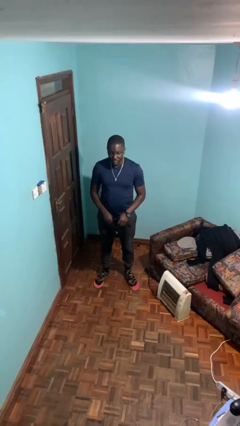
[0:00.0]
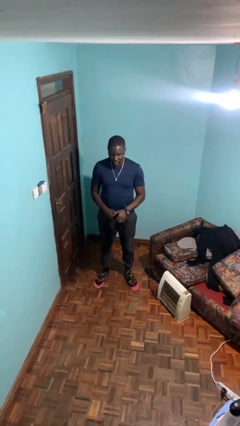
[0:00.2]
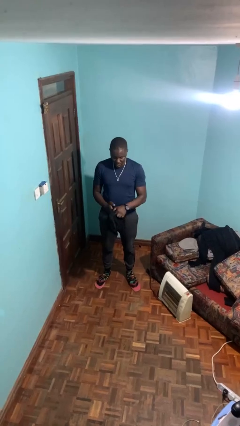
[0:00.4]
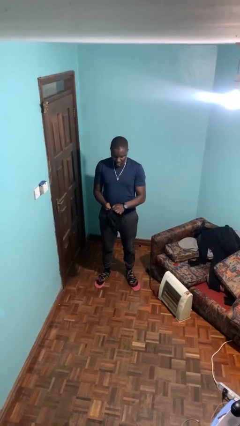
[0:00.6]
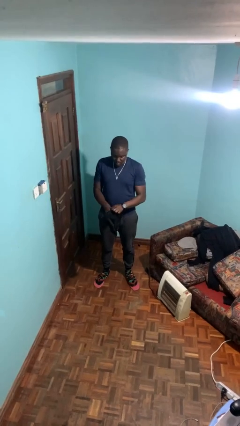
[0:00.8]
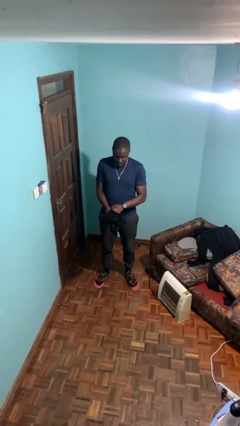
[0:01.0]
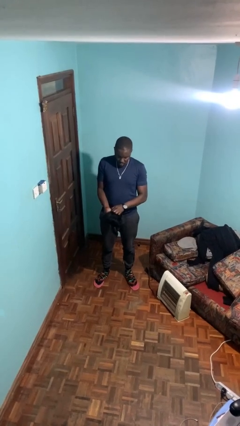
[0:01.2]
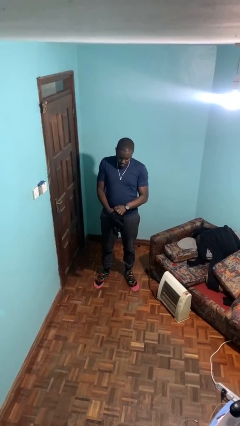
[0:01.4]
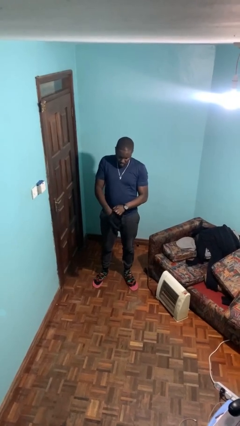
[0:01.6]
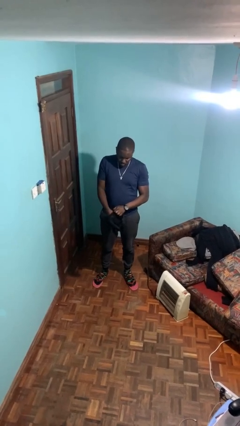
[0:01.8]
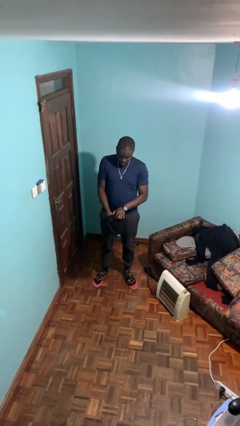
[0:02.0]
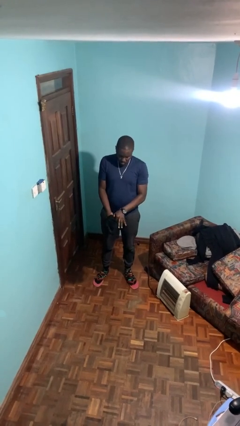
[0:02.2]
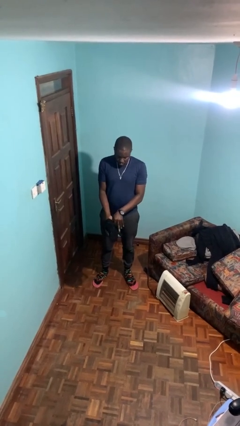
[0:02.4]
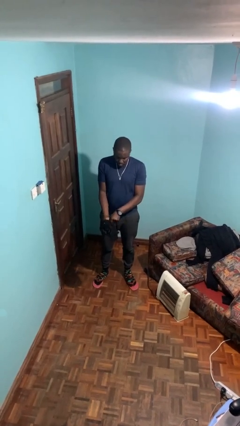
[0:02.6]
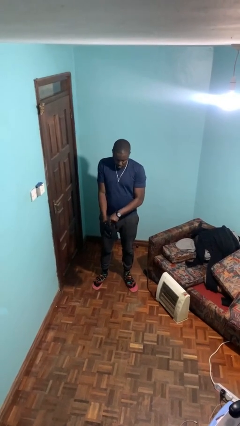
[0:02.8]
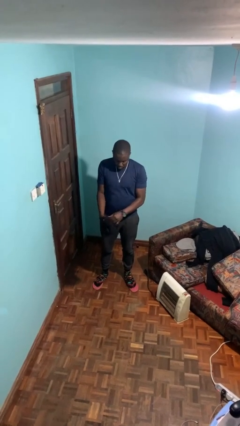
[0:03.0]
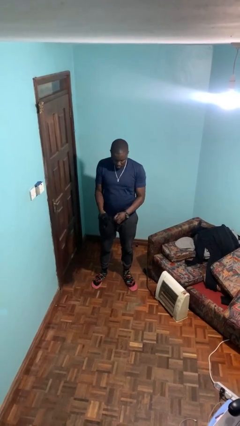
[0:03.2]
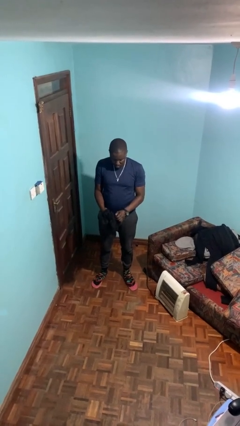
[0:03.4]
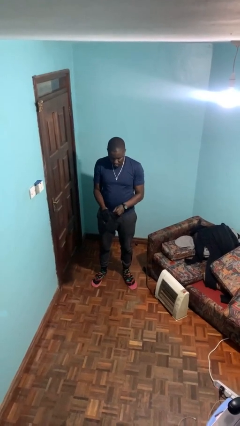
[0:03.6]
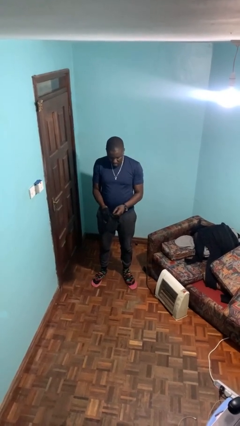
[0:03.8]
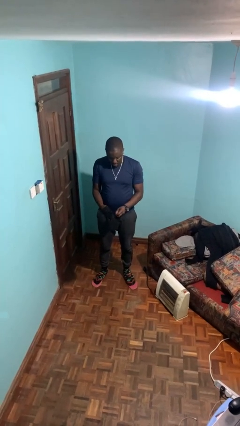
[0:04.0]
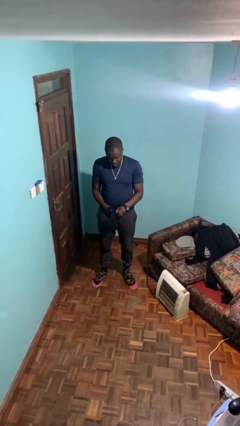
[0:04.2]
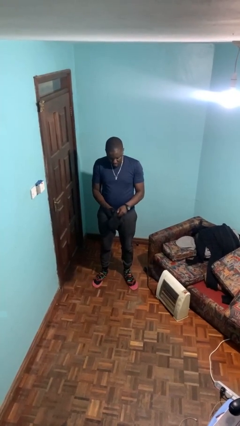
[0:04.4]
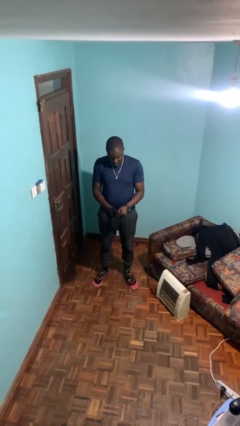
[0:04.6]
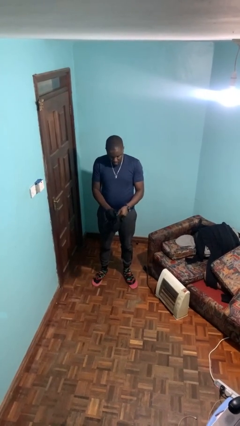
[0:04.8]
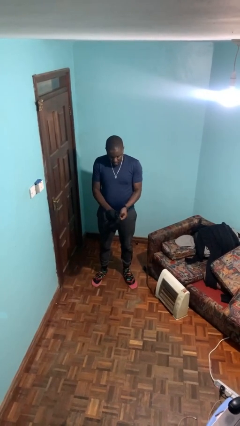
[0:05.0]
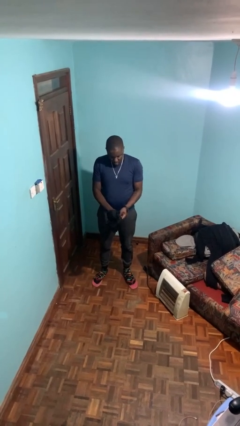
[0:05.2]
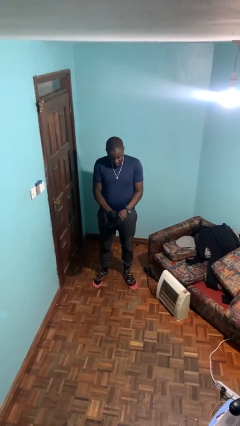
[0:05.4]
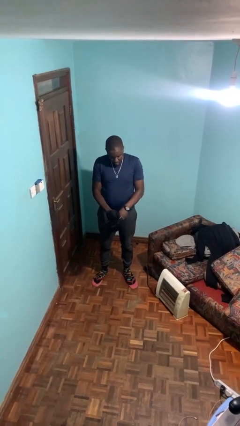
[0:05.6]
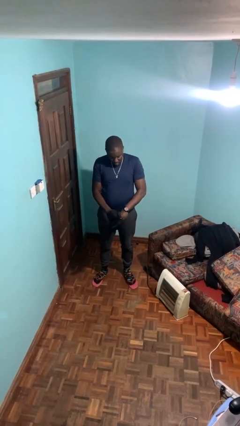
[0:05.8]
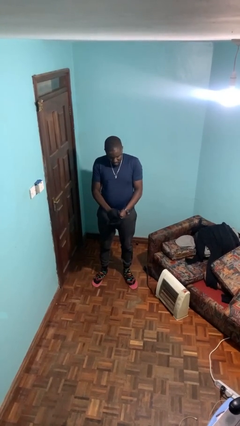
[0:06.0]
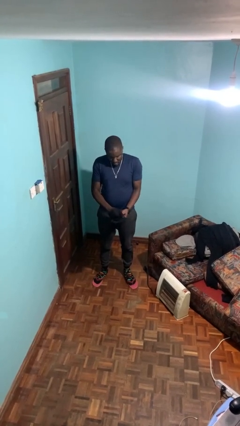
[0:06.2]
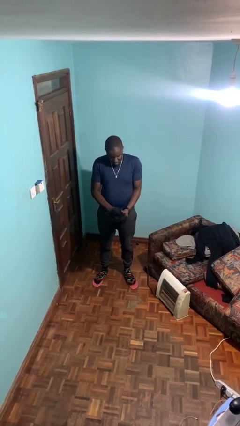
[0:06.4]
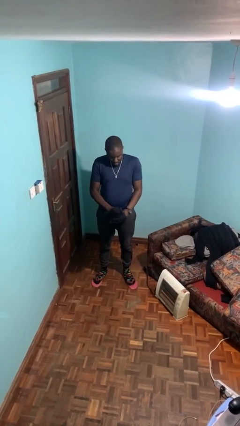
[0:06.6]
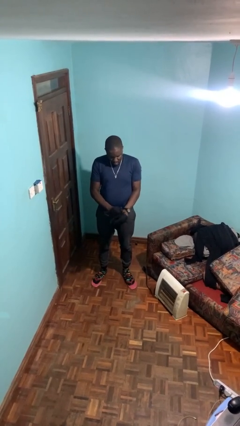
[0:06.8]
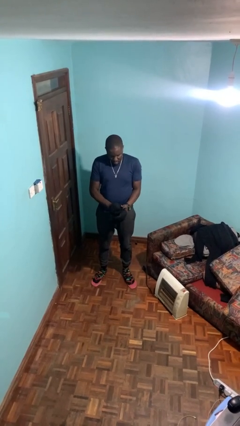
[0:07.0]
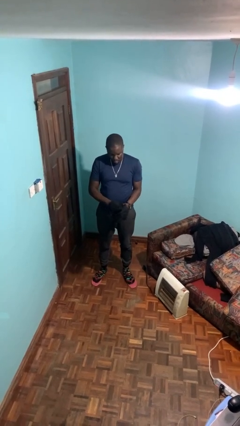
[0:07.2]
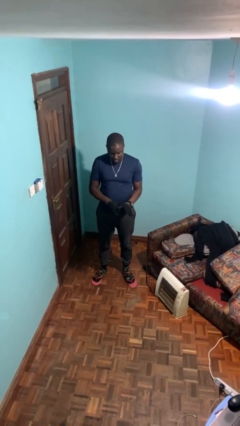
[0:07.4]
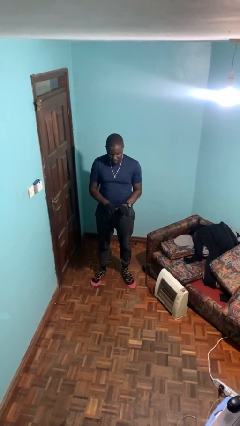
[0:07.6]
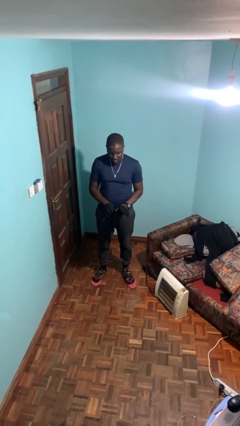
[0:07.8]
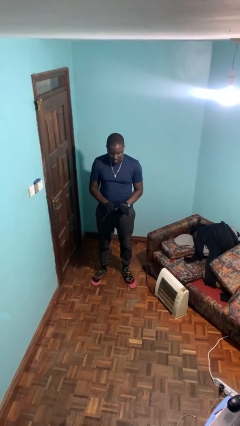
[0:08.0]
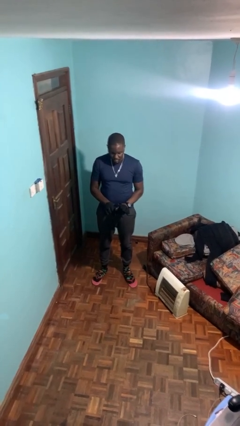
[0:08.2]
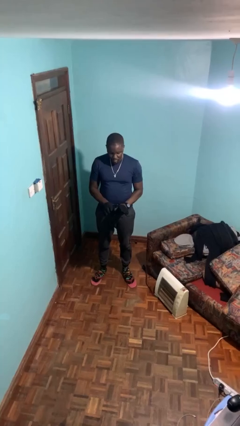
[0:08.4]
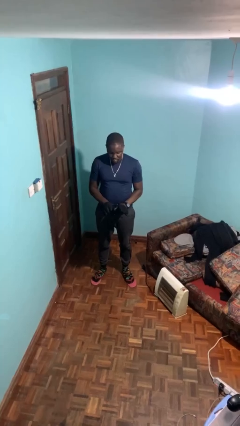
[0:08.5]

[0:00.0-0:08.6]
person puts on gloves

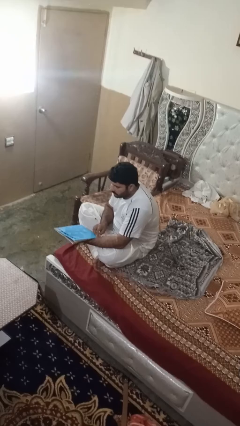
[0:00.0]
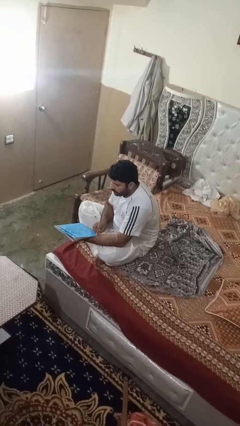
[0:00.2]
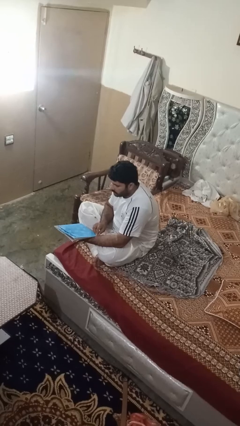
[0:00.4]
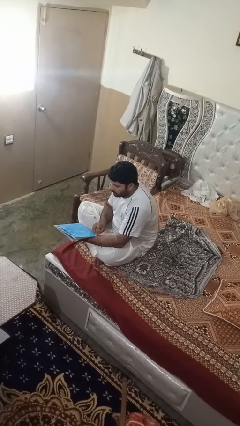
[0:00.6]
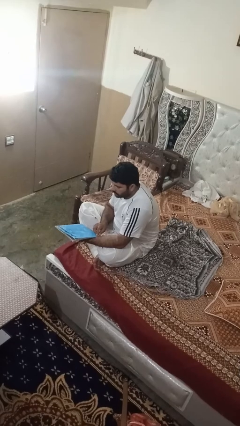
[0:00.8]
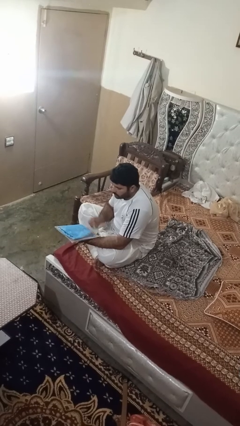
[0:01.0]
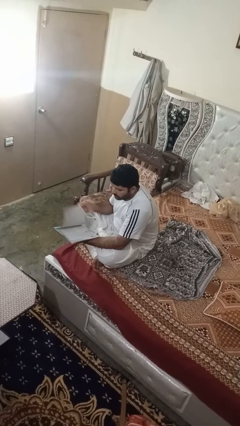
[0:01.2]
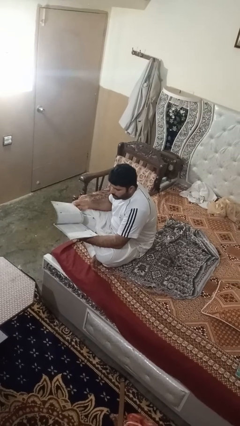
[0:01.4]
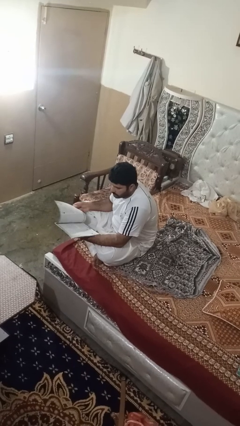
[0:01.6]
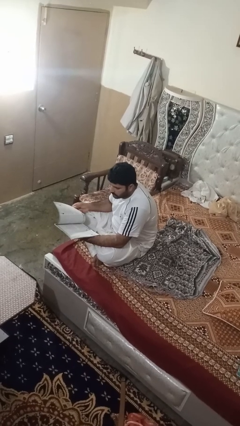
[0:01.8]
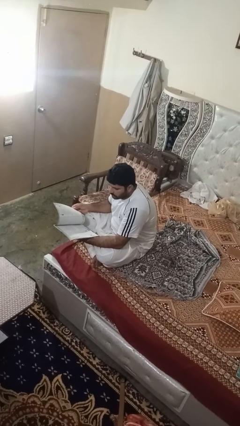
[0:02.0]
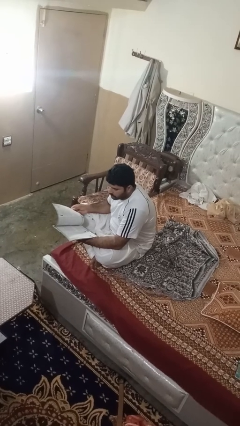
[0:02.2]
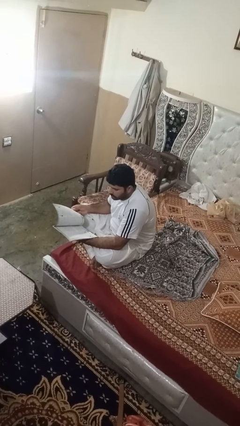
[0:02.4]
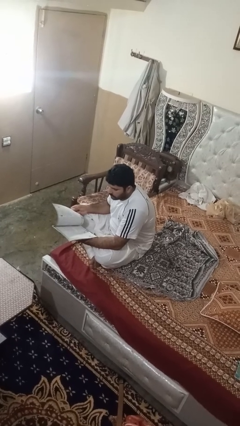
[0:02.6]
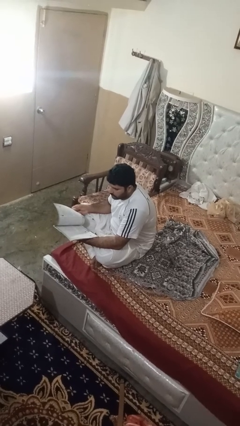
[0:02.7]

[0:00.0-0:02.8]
person reads magazine

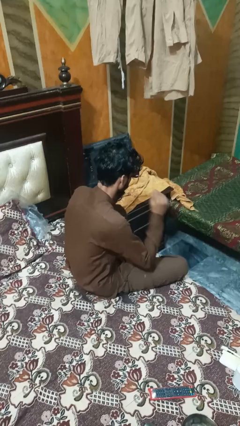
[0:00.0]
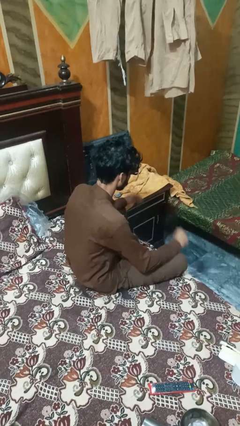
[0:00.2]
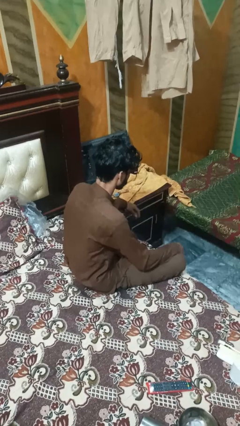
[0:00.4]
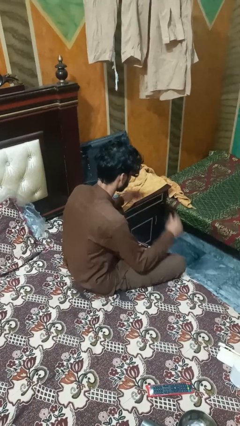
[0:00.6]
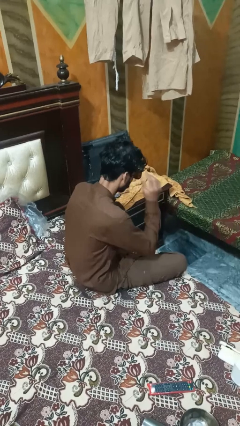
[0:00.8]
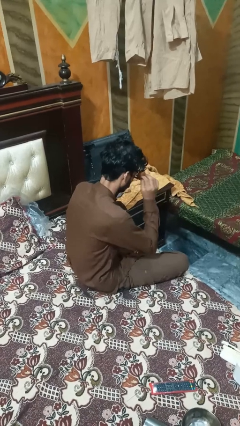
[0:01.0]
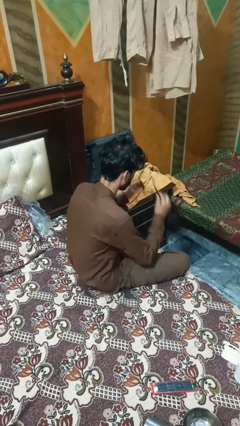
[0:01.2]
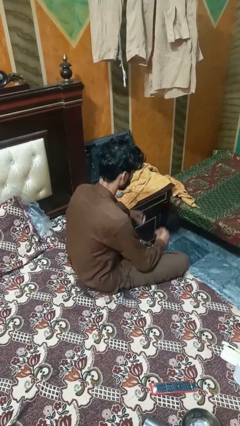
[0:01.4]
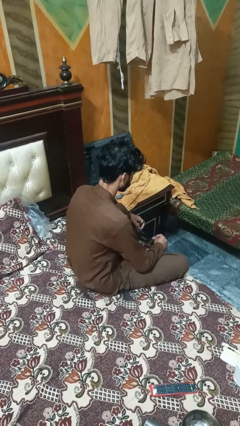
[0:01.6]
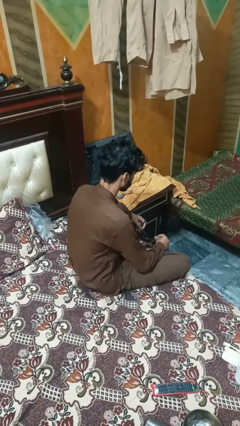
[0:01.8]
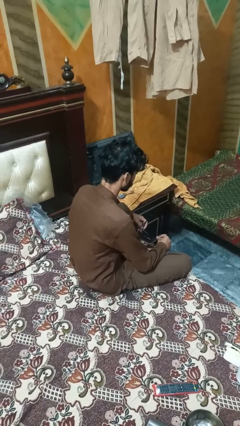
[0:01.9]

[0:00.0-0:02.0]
person takes off sunglasses

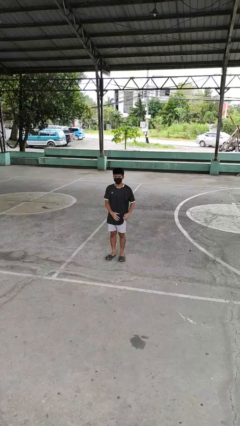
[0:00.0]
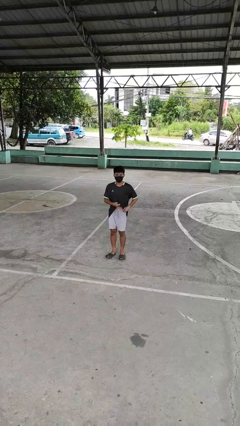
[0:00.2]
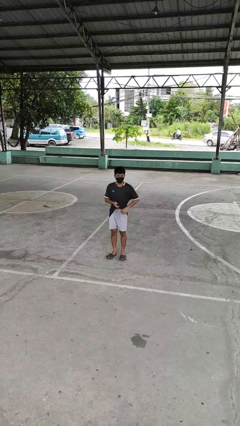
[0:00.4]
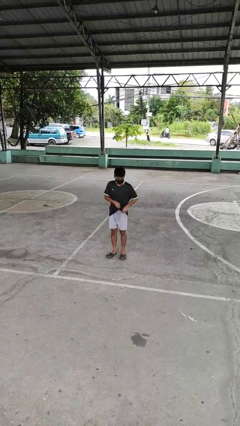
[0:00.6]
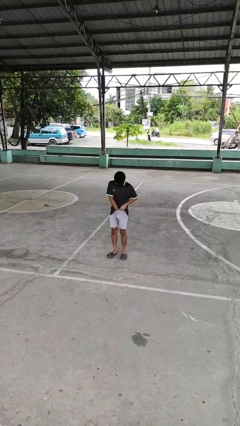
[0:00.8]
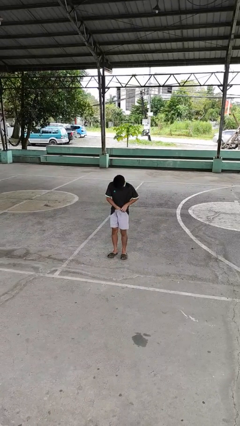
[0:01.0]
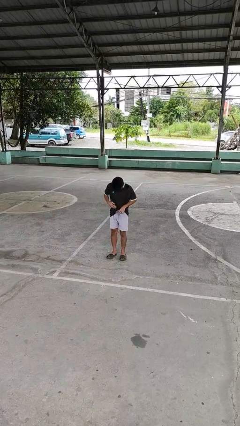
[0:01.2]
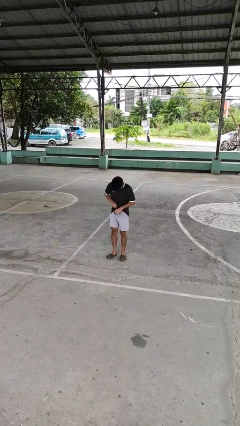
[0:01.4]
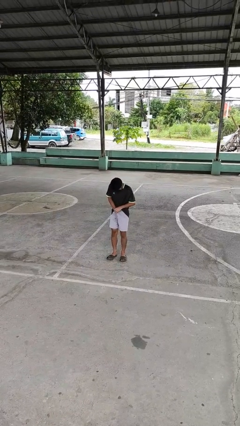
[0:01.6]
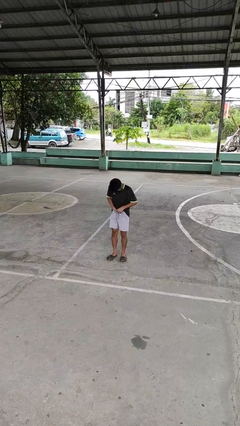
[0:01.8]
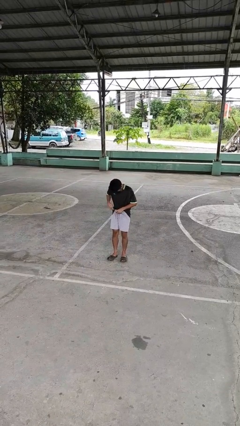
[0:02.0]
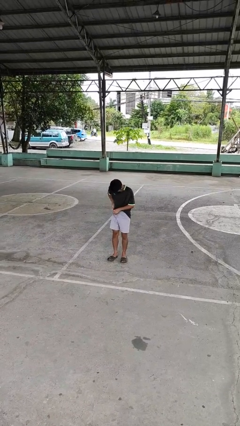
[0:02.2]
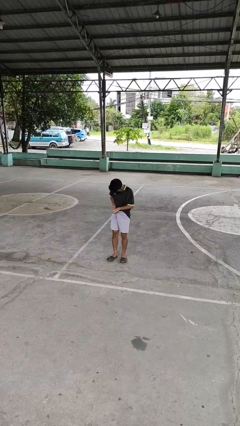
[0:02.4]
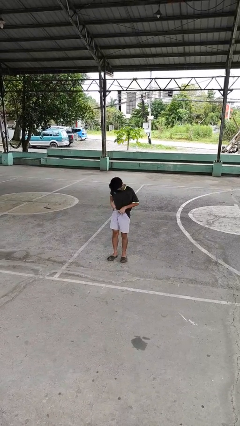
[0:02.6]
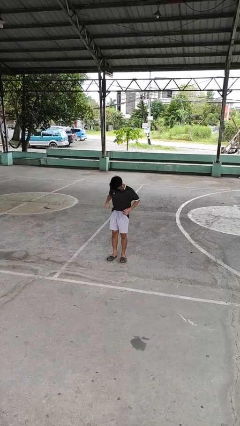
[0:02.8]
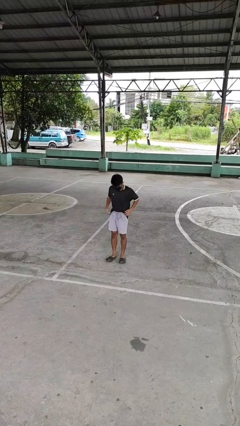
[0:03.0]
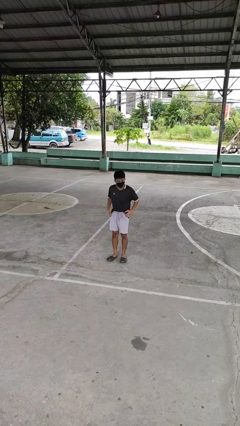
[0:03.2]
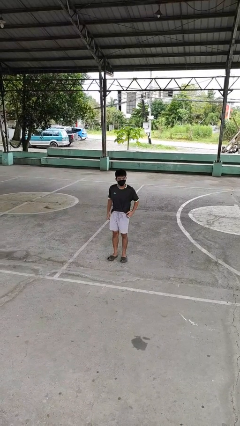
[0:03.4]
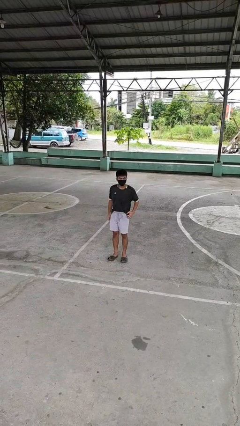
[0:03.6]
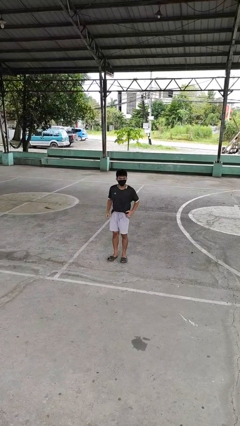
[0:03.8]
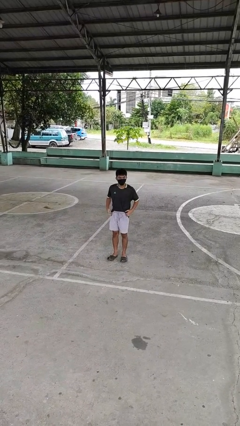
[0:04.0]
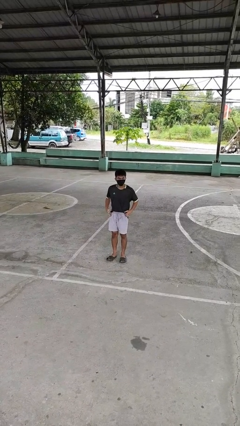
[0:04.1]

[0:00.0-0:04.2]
person tucks in shirt

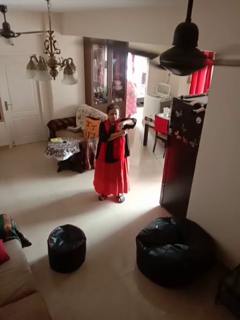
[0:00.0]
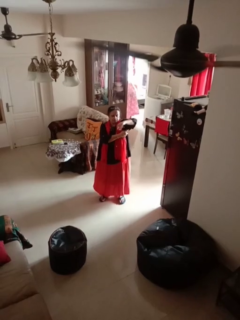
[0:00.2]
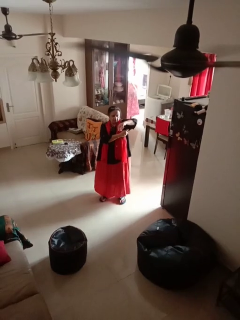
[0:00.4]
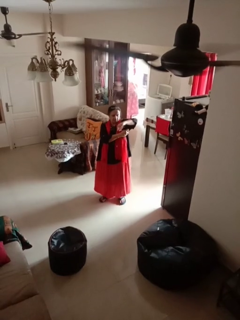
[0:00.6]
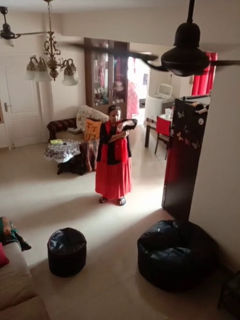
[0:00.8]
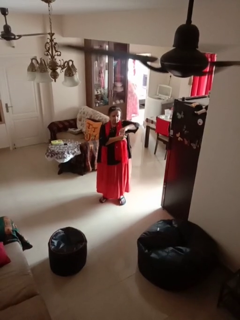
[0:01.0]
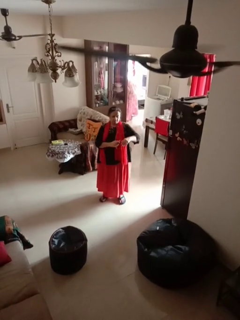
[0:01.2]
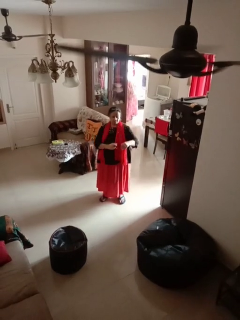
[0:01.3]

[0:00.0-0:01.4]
person applies deodorant
